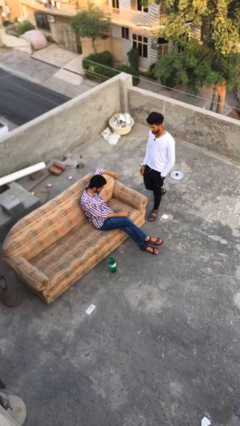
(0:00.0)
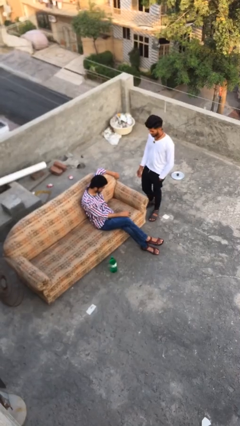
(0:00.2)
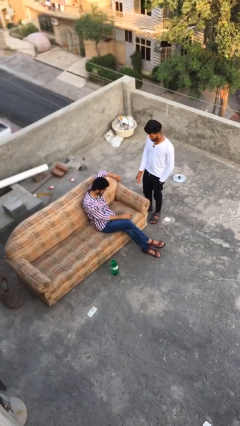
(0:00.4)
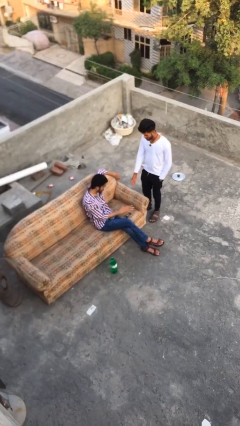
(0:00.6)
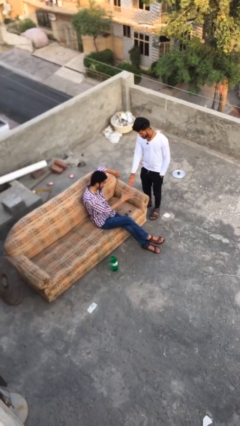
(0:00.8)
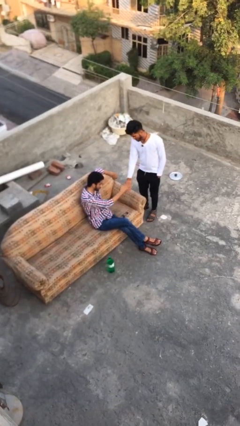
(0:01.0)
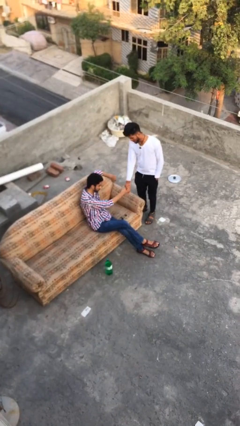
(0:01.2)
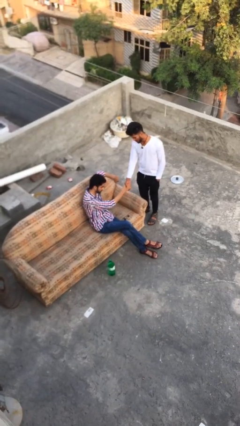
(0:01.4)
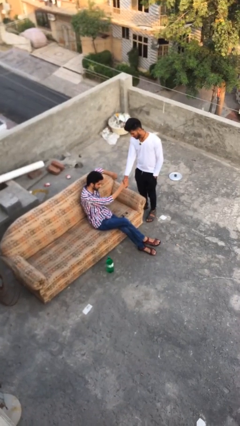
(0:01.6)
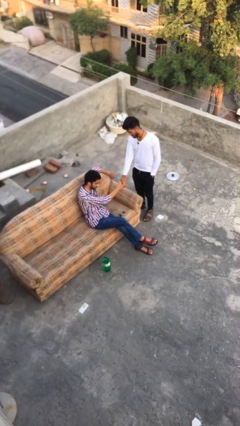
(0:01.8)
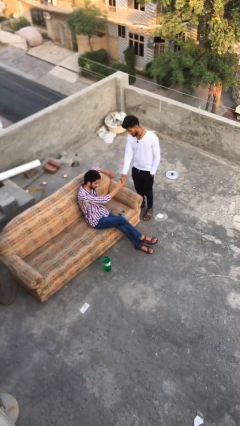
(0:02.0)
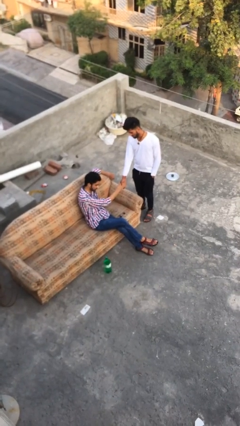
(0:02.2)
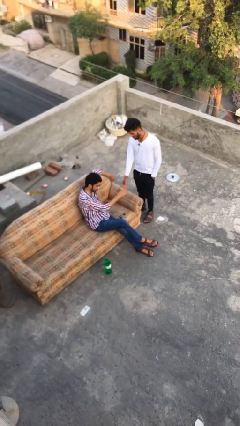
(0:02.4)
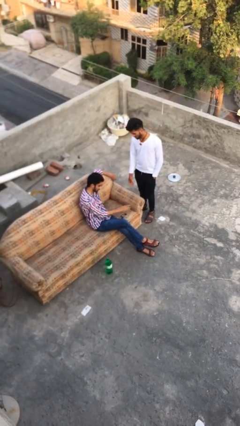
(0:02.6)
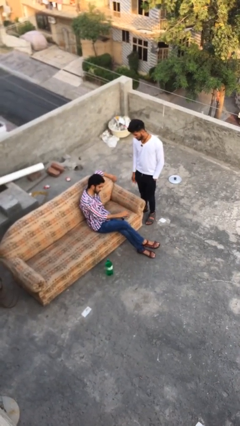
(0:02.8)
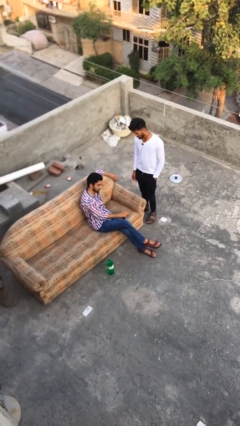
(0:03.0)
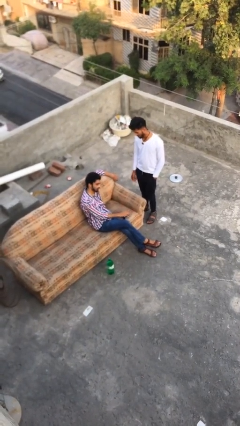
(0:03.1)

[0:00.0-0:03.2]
person shakes hand

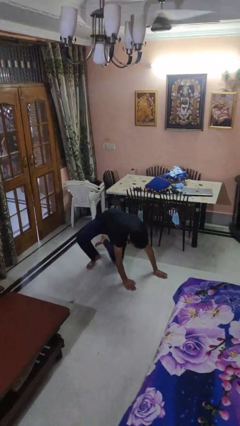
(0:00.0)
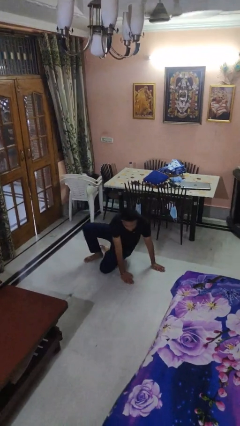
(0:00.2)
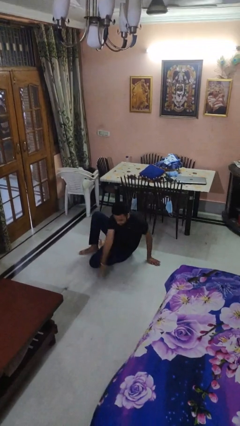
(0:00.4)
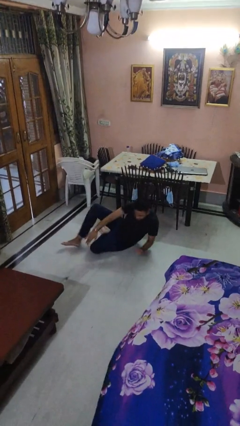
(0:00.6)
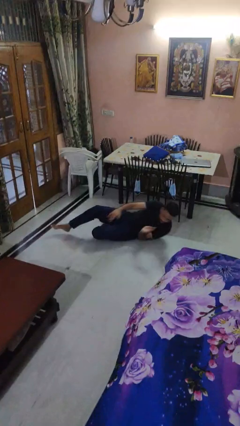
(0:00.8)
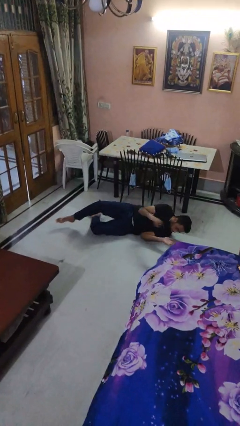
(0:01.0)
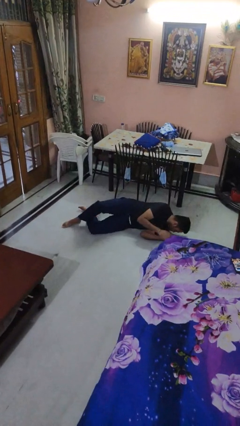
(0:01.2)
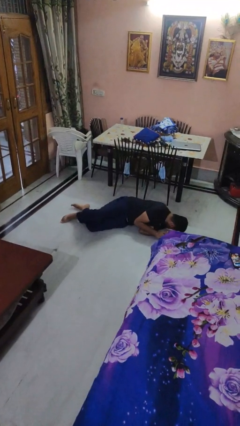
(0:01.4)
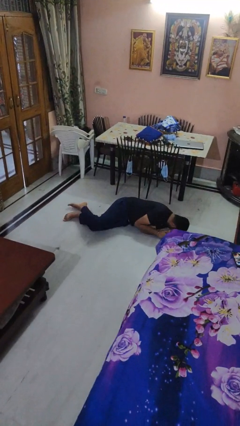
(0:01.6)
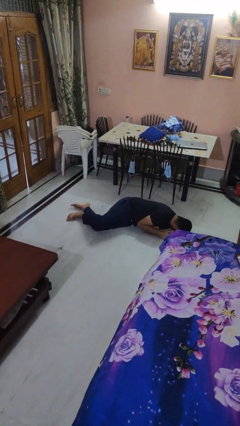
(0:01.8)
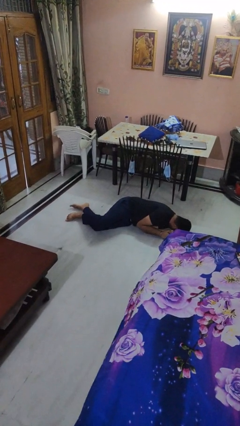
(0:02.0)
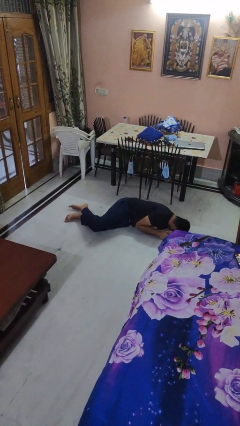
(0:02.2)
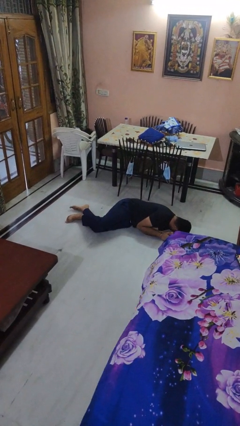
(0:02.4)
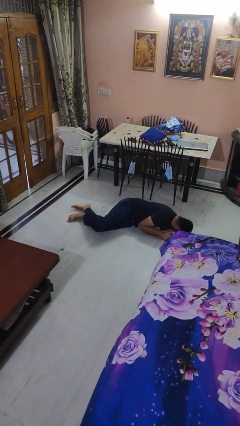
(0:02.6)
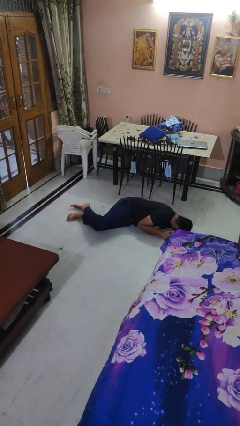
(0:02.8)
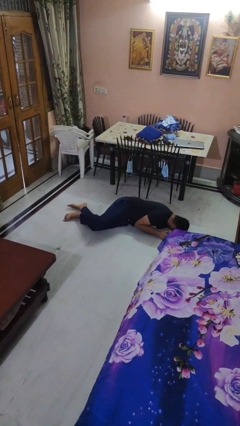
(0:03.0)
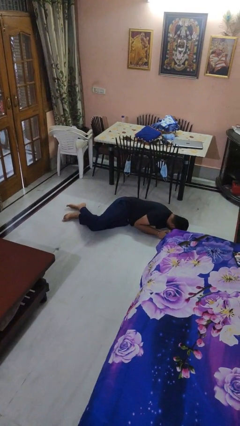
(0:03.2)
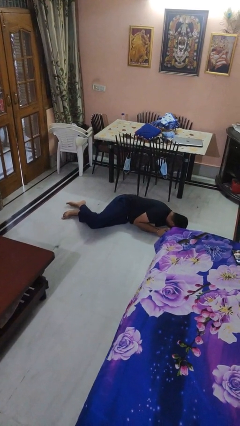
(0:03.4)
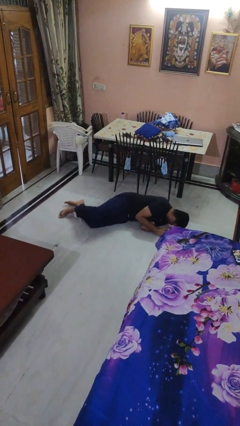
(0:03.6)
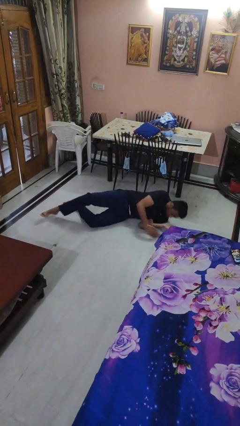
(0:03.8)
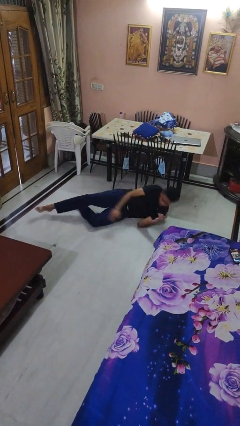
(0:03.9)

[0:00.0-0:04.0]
person lies down on floor

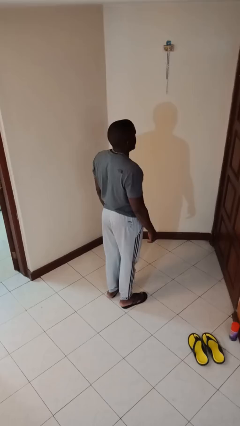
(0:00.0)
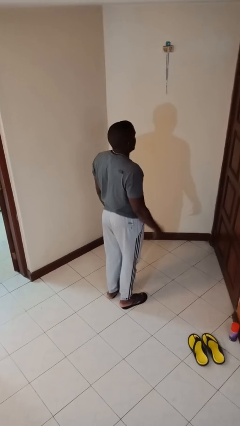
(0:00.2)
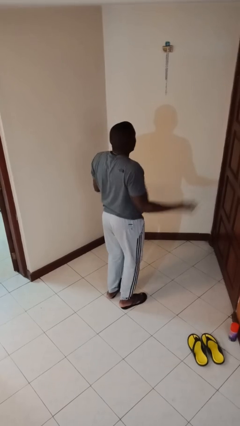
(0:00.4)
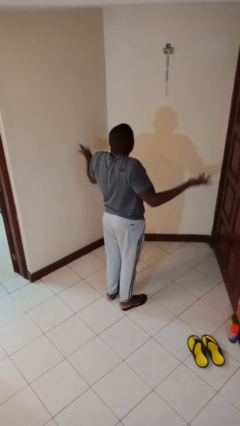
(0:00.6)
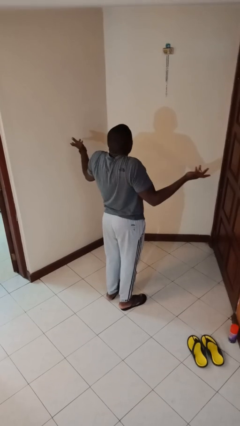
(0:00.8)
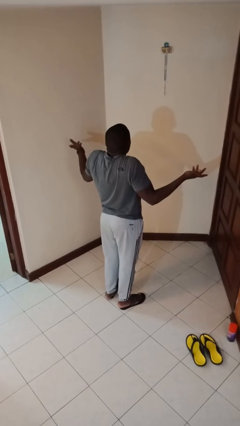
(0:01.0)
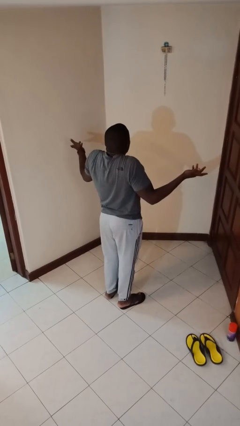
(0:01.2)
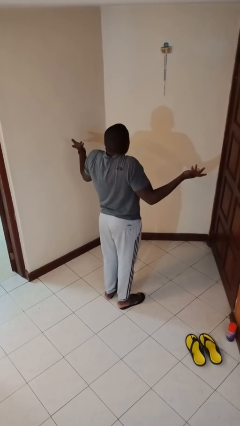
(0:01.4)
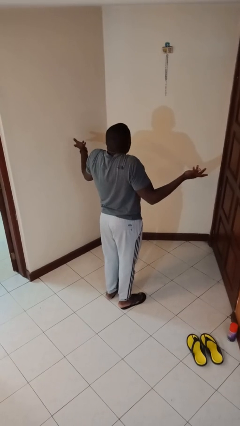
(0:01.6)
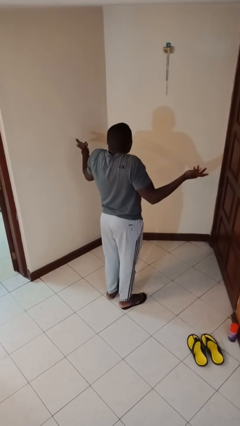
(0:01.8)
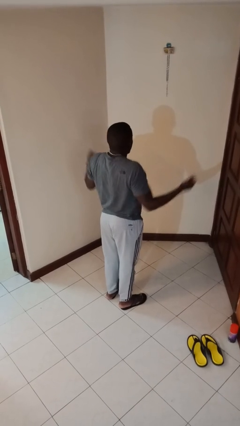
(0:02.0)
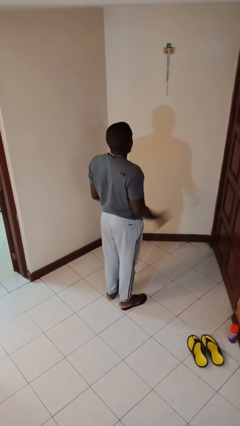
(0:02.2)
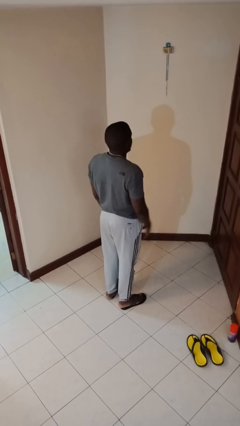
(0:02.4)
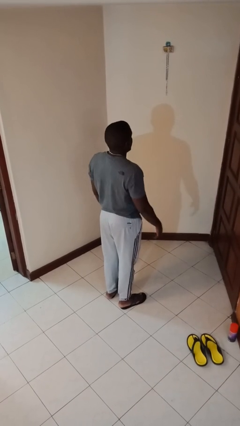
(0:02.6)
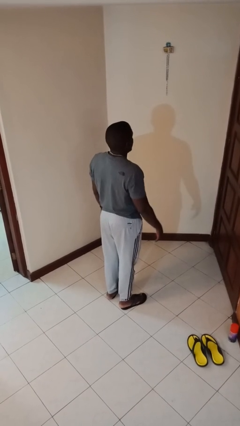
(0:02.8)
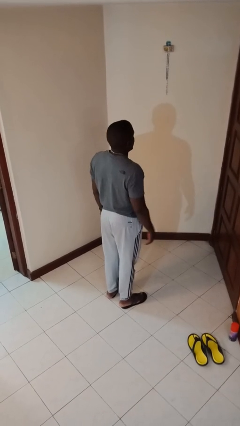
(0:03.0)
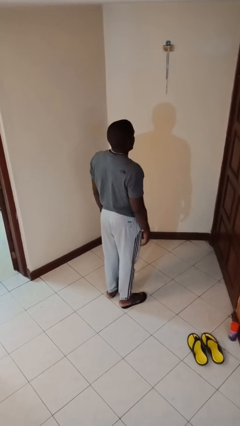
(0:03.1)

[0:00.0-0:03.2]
person shrugs

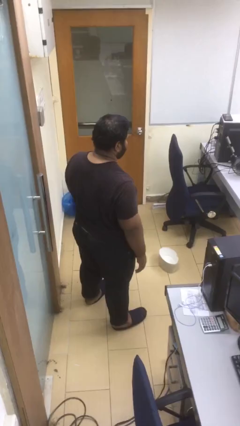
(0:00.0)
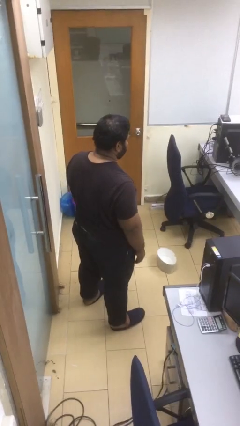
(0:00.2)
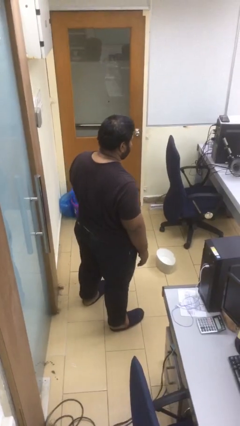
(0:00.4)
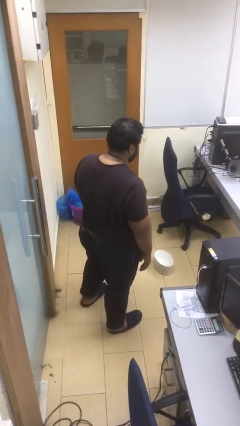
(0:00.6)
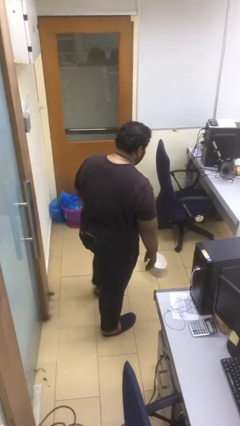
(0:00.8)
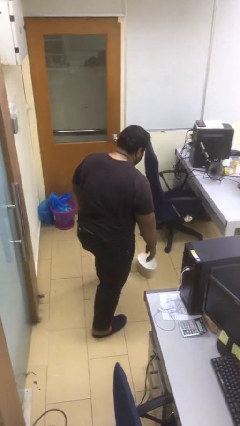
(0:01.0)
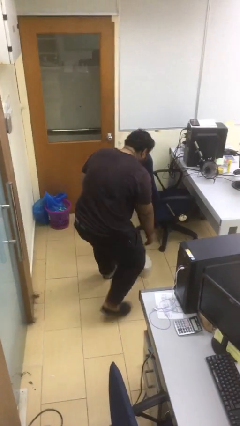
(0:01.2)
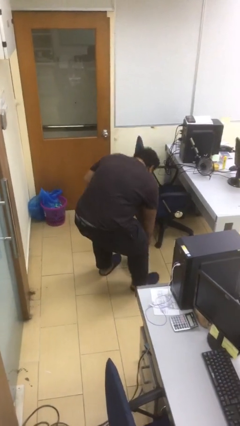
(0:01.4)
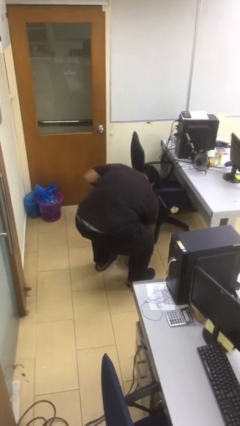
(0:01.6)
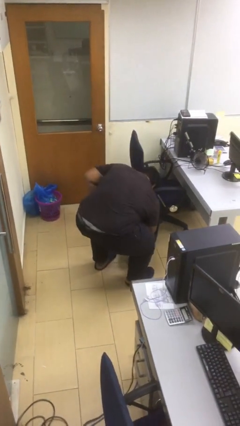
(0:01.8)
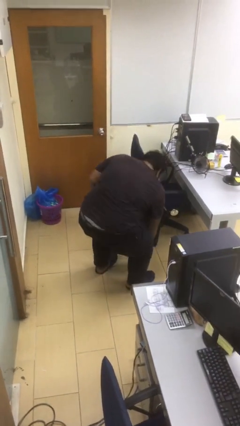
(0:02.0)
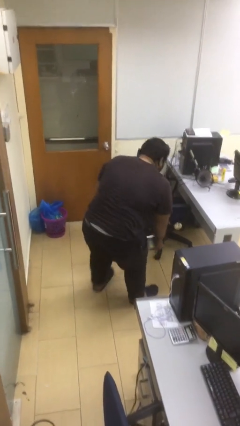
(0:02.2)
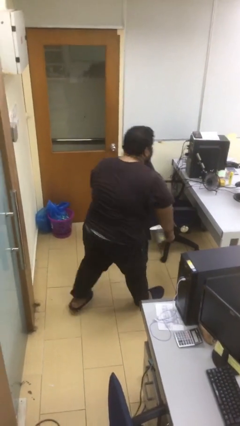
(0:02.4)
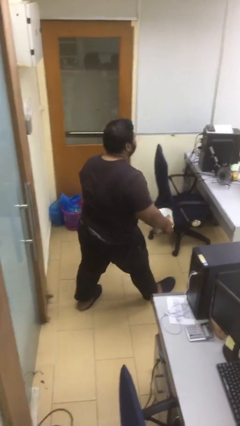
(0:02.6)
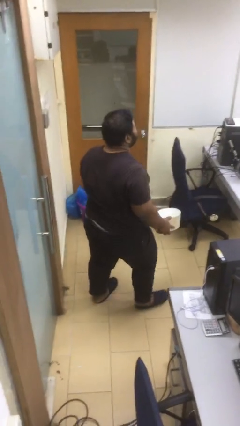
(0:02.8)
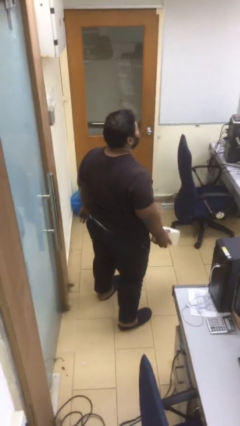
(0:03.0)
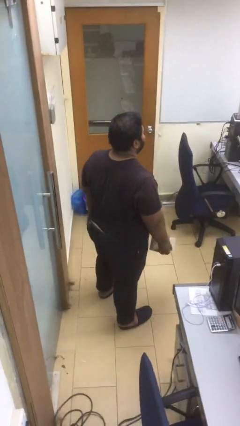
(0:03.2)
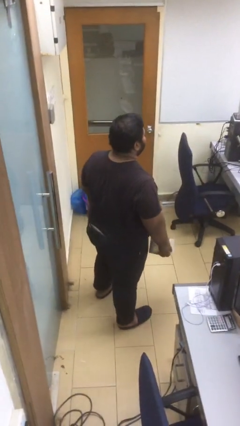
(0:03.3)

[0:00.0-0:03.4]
person picks up object from floor

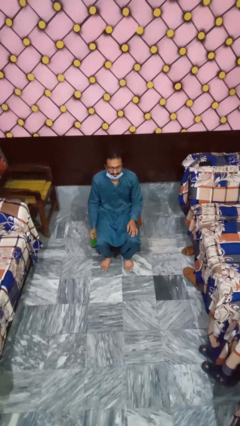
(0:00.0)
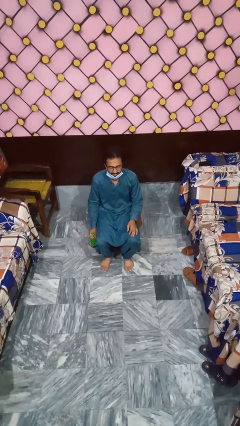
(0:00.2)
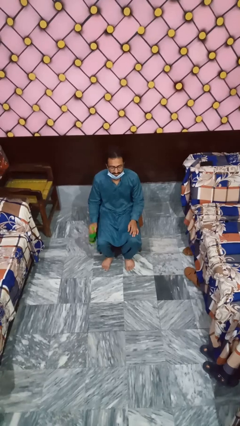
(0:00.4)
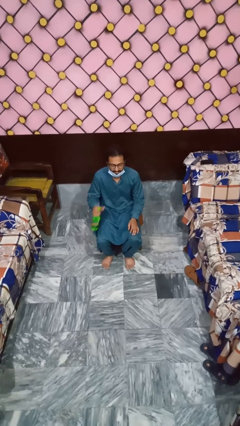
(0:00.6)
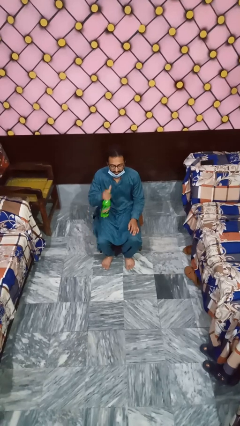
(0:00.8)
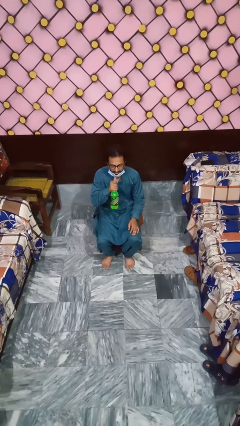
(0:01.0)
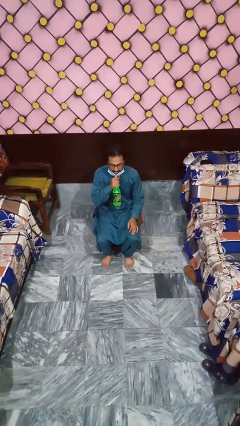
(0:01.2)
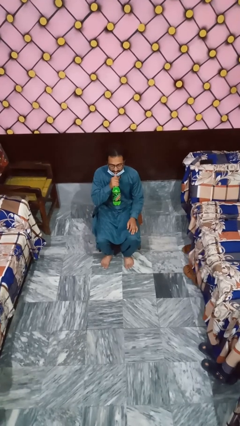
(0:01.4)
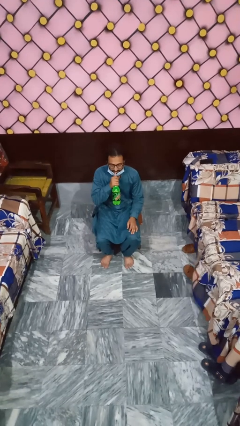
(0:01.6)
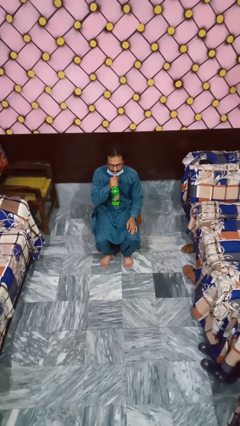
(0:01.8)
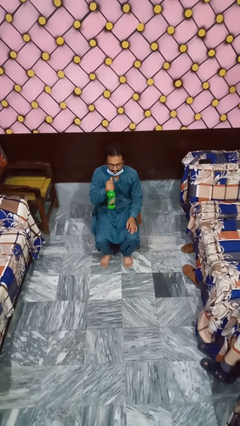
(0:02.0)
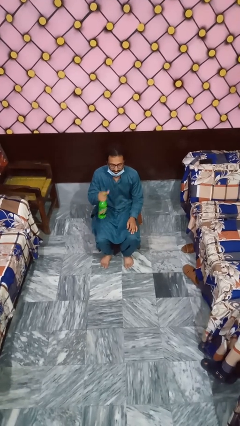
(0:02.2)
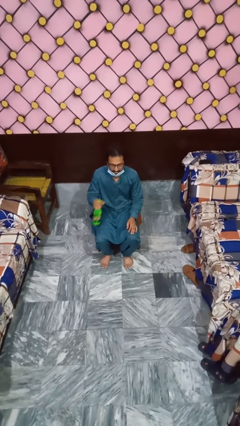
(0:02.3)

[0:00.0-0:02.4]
person drinks from straw

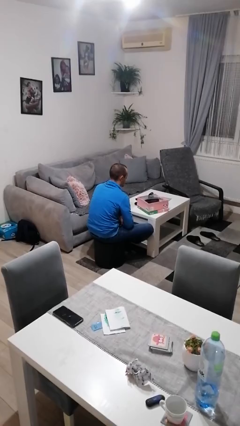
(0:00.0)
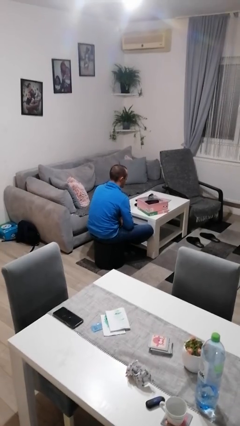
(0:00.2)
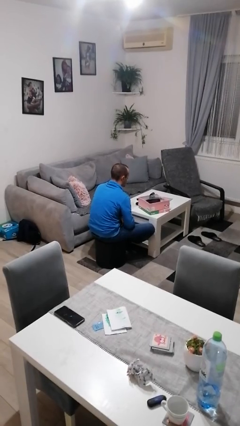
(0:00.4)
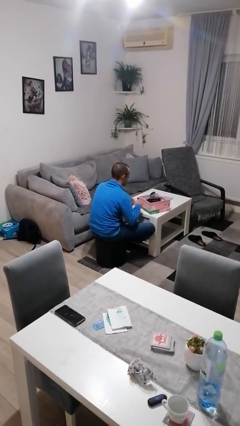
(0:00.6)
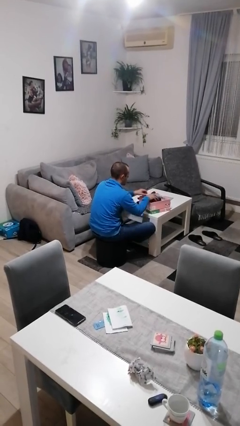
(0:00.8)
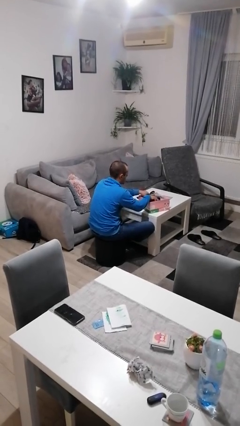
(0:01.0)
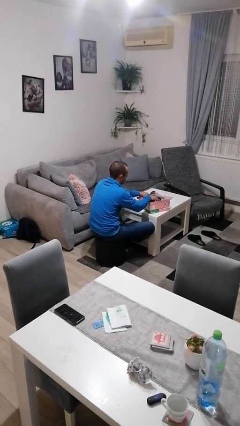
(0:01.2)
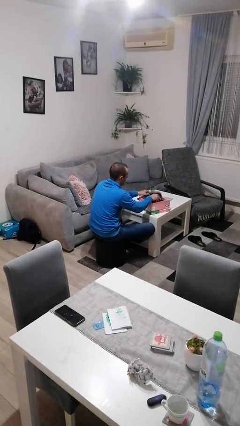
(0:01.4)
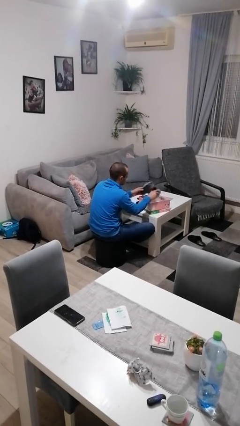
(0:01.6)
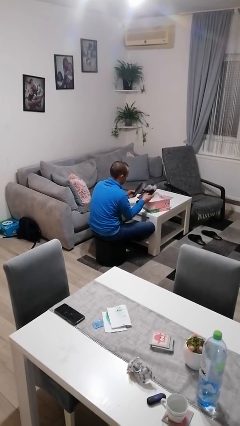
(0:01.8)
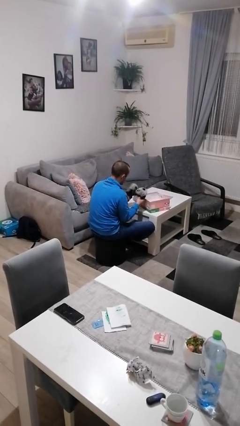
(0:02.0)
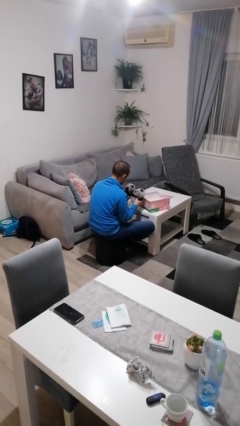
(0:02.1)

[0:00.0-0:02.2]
person takes object from box
